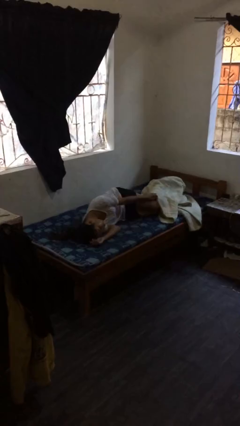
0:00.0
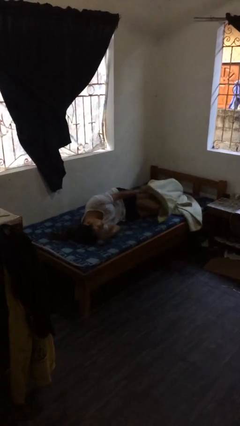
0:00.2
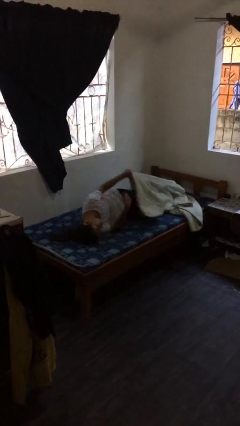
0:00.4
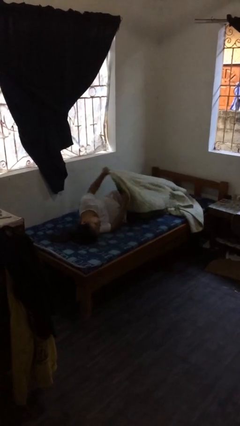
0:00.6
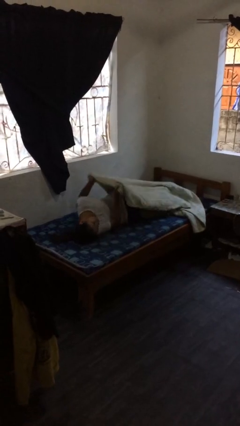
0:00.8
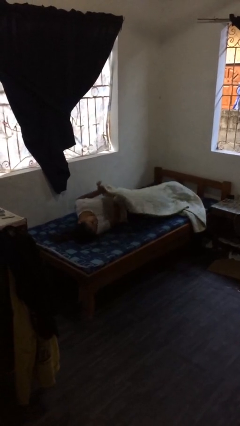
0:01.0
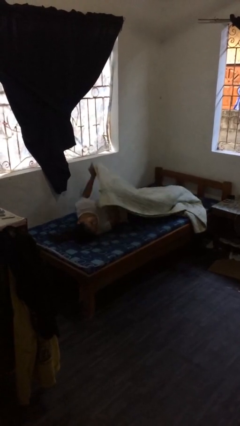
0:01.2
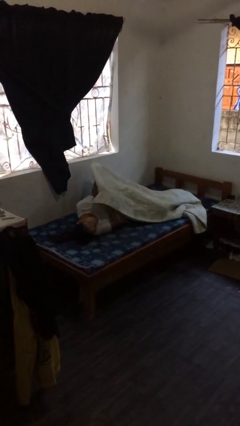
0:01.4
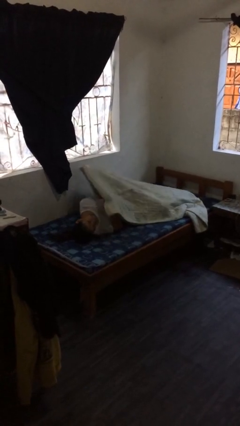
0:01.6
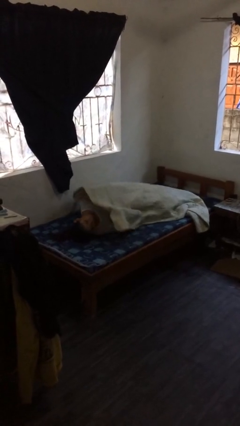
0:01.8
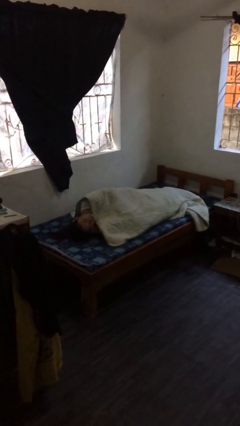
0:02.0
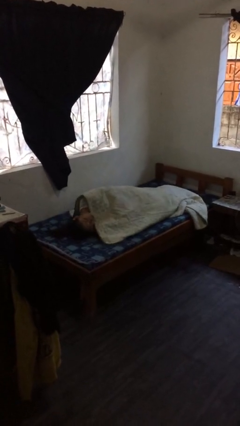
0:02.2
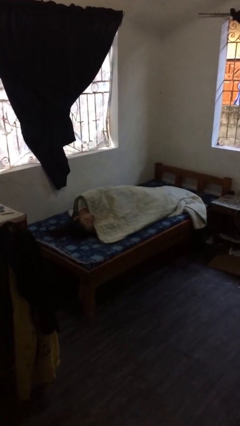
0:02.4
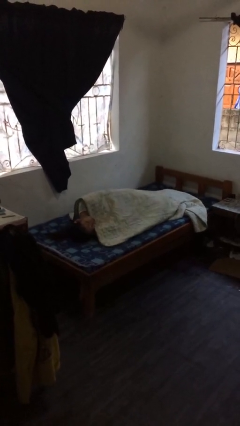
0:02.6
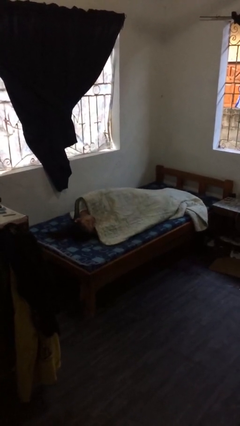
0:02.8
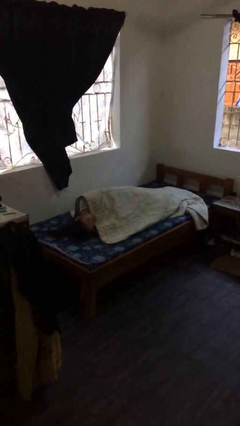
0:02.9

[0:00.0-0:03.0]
person covers with bedsheets

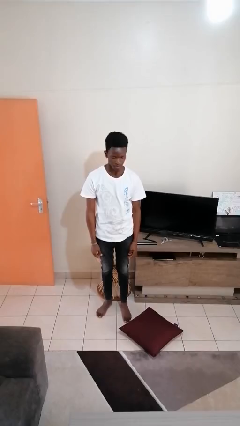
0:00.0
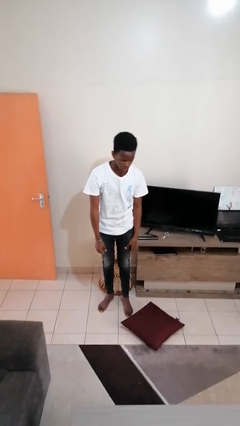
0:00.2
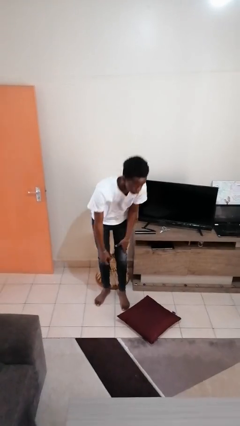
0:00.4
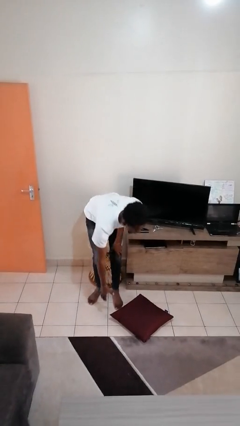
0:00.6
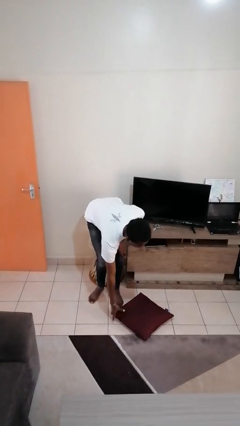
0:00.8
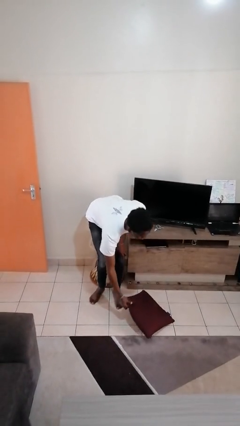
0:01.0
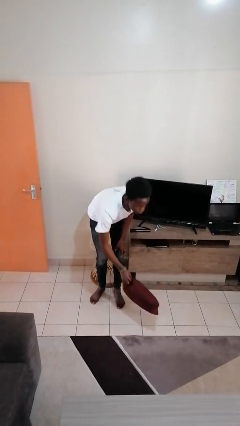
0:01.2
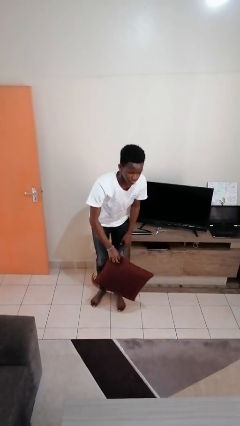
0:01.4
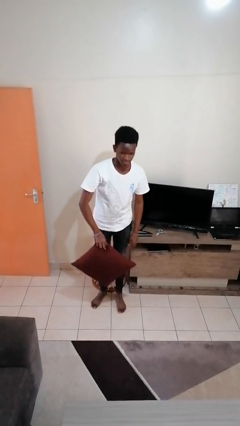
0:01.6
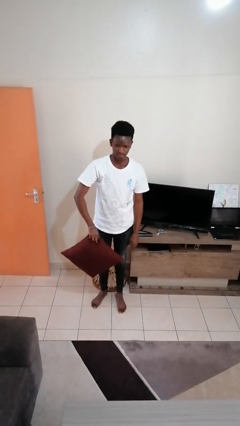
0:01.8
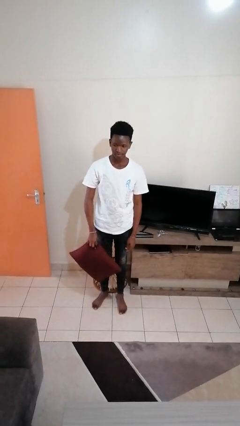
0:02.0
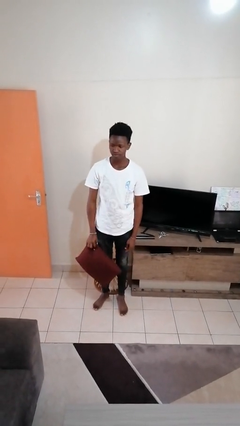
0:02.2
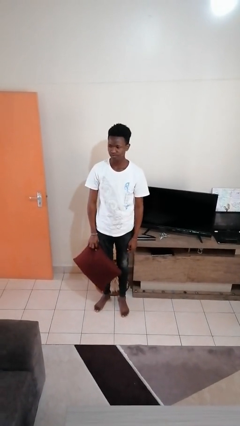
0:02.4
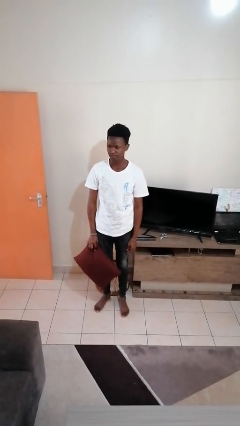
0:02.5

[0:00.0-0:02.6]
person picks up object from floor

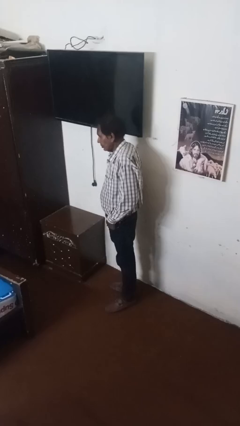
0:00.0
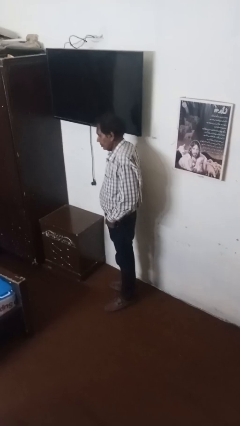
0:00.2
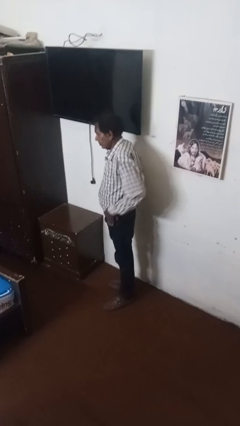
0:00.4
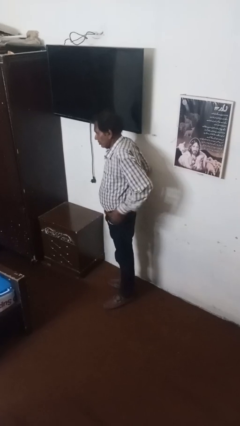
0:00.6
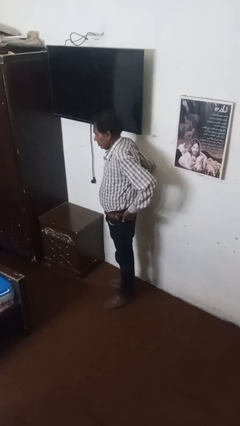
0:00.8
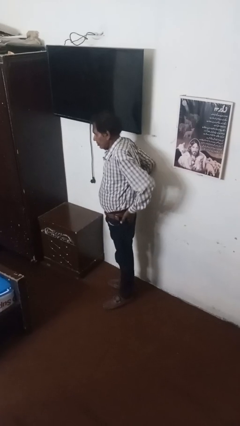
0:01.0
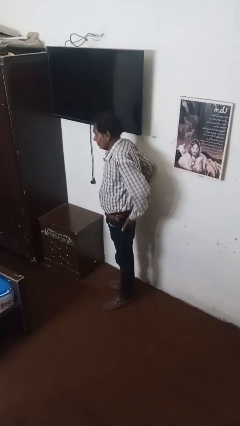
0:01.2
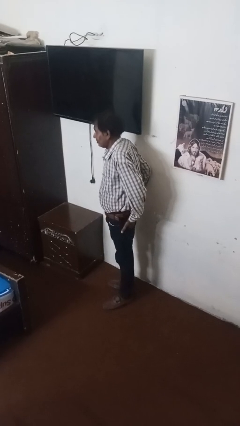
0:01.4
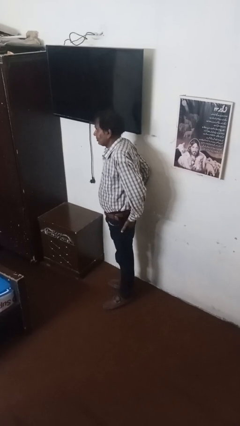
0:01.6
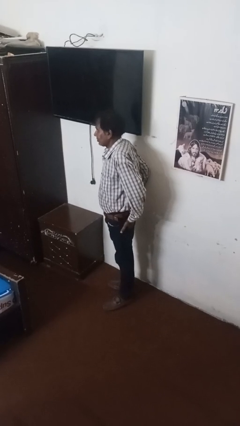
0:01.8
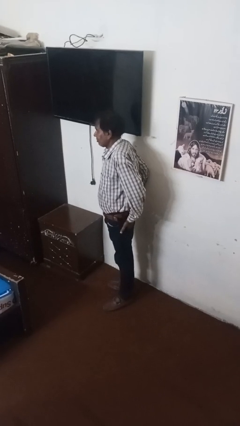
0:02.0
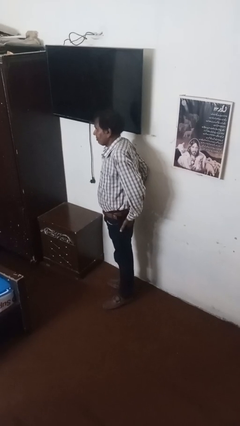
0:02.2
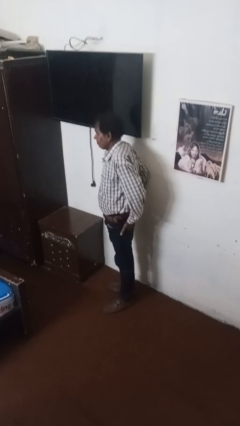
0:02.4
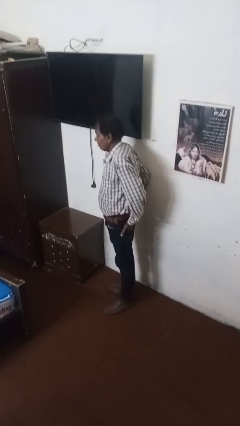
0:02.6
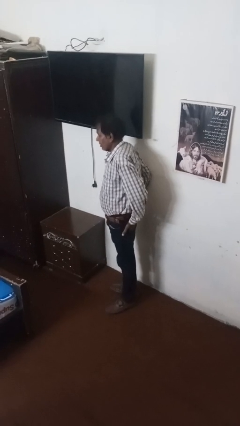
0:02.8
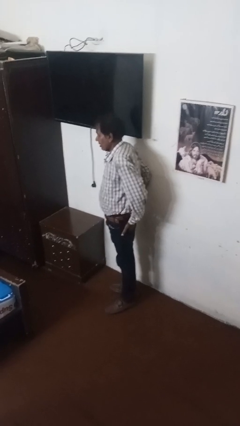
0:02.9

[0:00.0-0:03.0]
person puts hands in back pockets

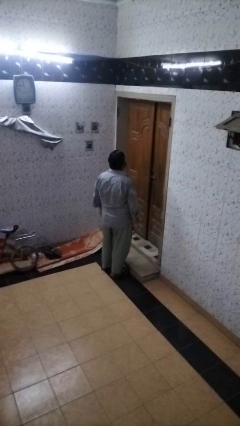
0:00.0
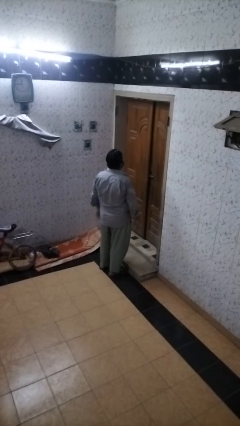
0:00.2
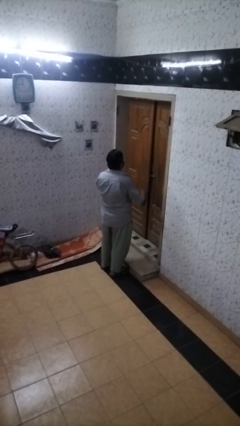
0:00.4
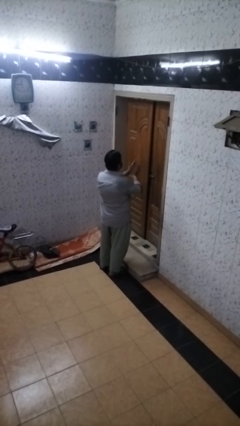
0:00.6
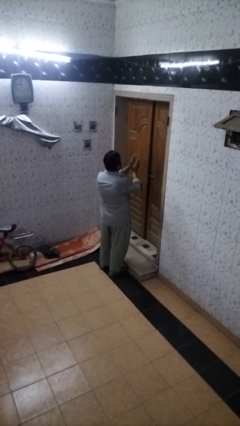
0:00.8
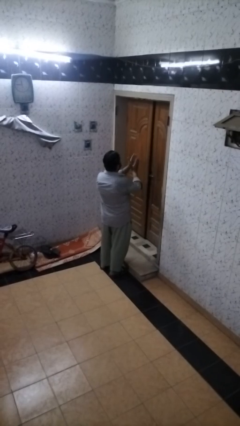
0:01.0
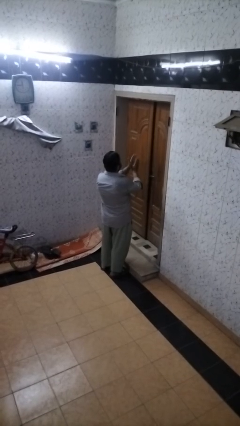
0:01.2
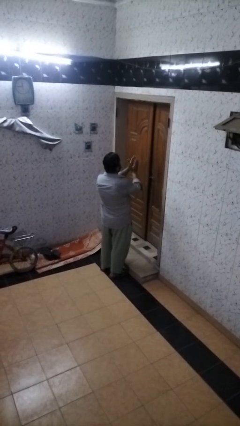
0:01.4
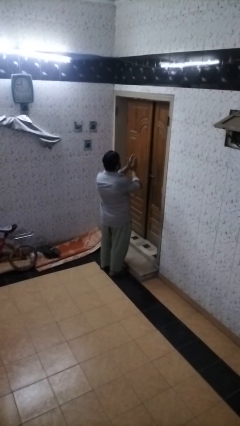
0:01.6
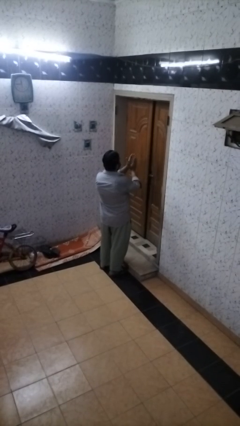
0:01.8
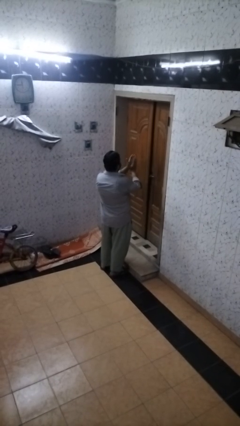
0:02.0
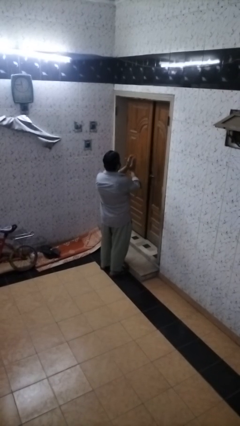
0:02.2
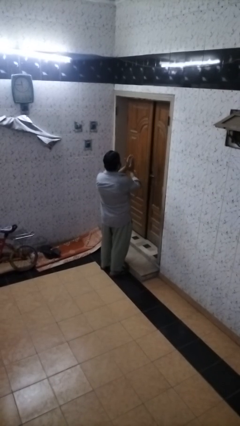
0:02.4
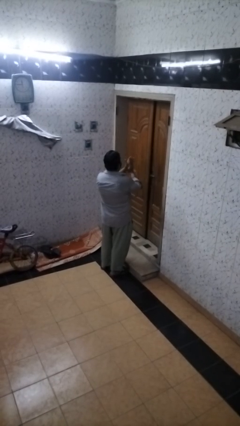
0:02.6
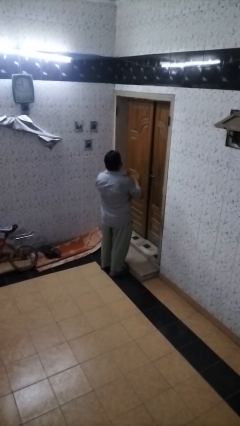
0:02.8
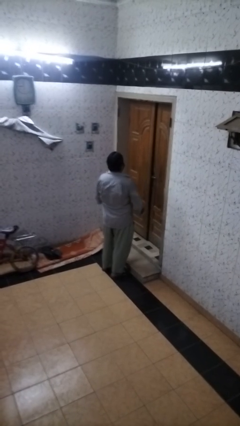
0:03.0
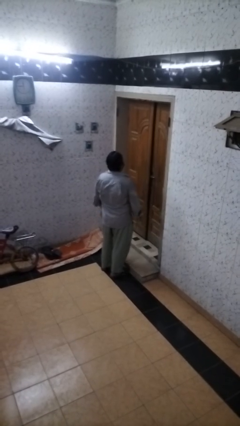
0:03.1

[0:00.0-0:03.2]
person claps hands

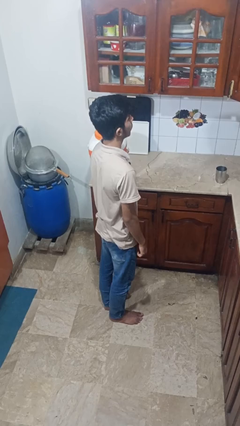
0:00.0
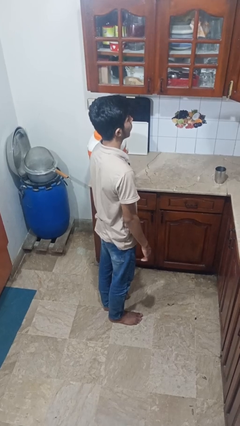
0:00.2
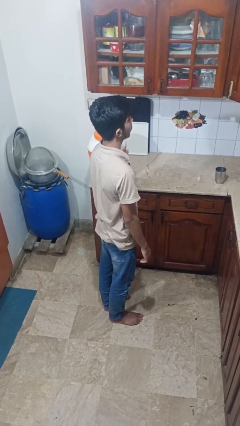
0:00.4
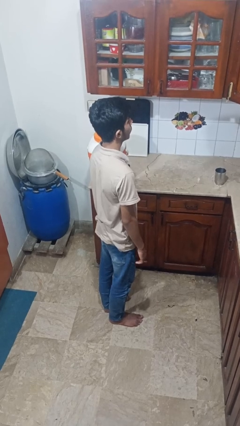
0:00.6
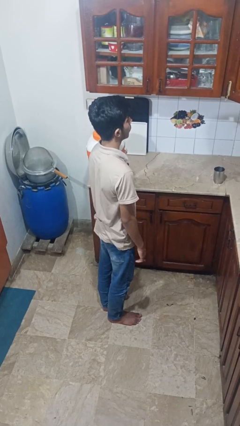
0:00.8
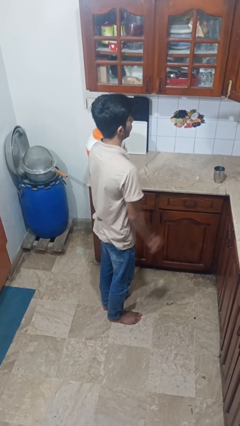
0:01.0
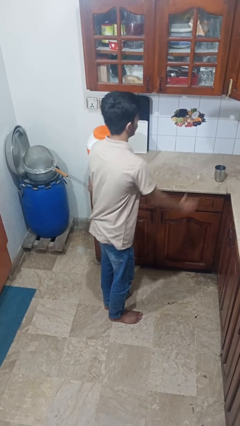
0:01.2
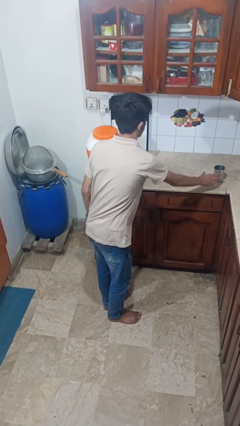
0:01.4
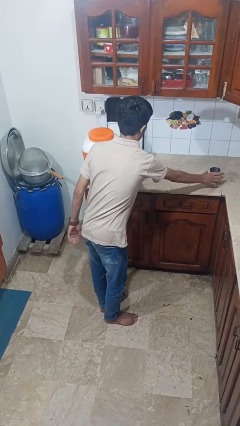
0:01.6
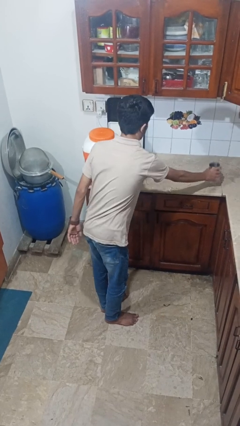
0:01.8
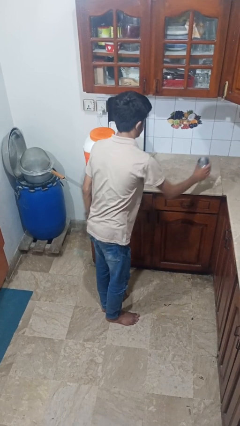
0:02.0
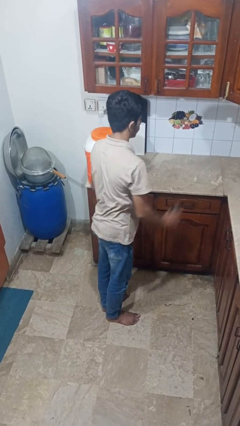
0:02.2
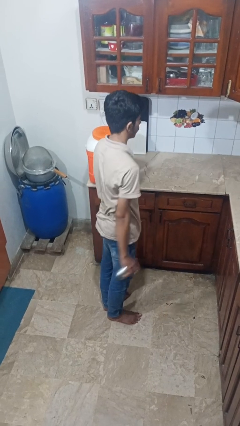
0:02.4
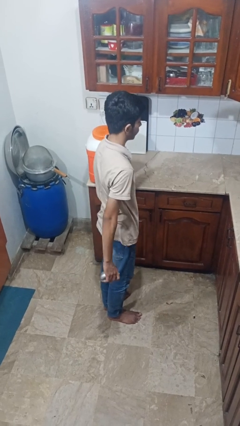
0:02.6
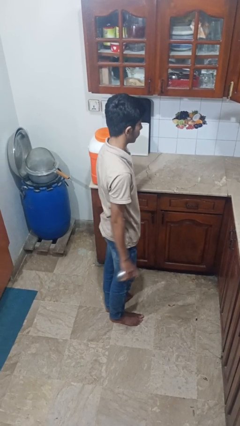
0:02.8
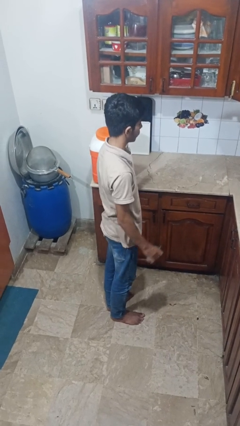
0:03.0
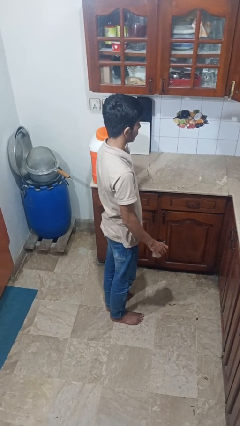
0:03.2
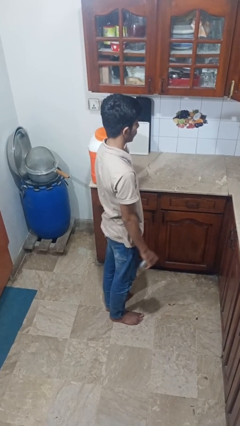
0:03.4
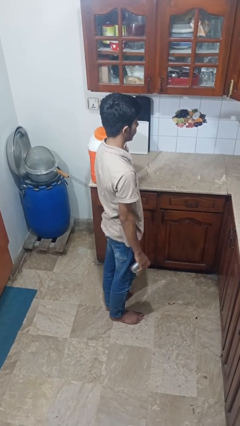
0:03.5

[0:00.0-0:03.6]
person picks up object from countertop

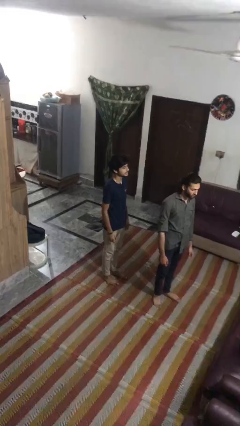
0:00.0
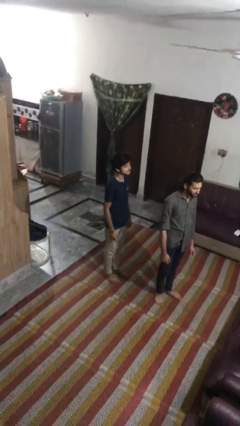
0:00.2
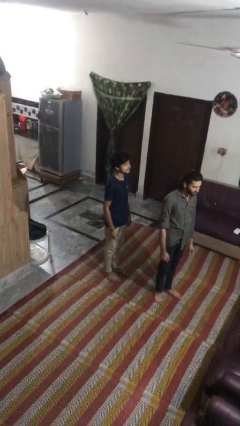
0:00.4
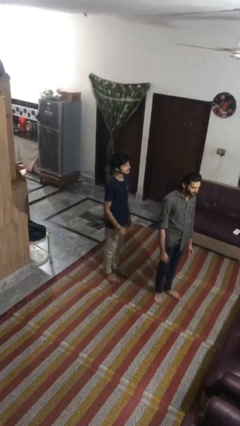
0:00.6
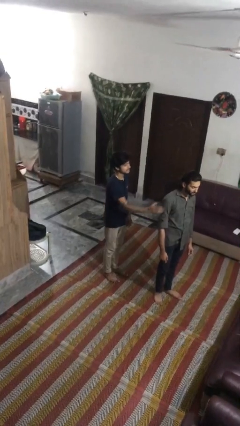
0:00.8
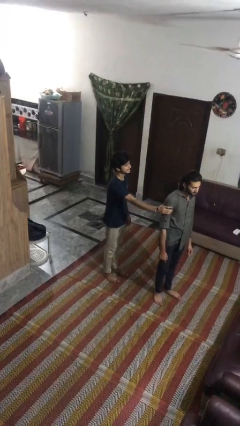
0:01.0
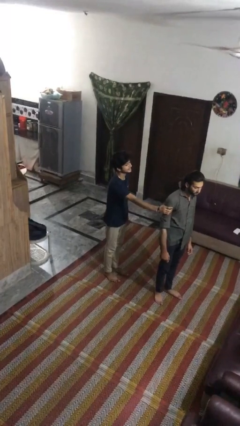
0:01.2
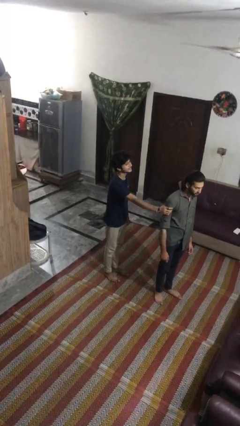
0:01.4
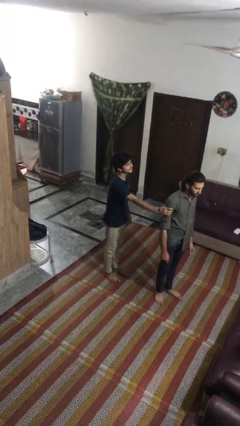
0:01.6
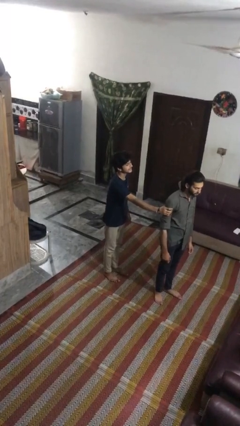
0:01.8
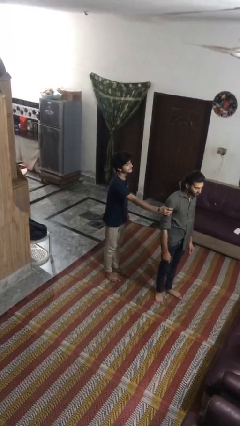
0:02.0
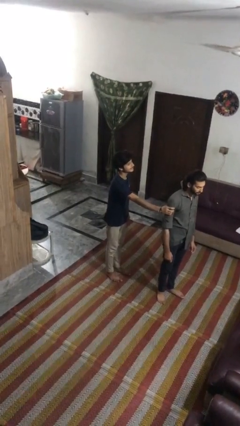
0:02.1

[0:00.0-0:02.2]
person grabs person by shoulder
